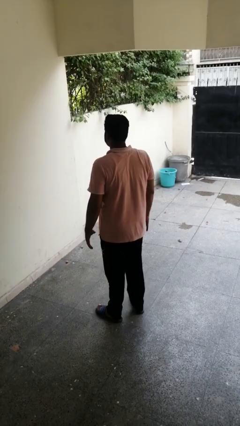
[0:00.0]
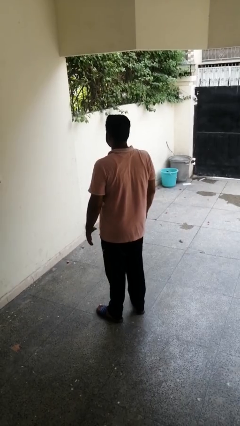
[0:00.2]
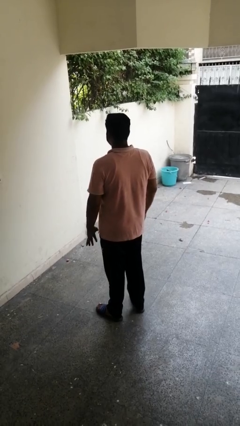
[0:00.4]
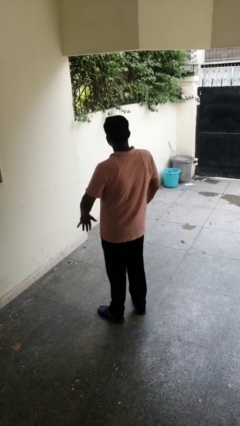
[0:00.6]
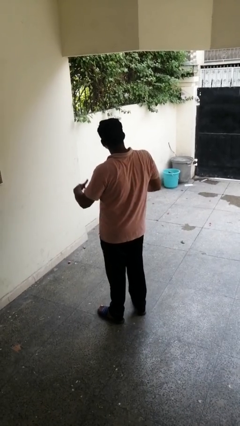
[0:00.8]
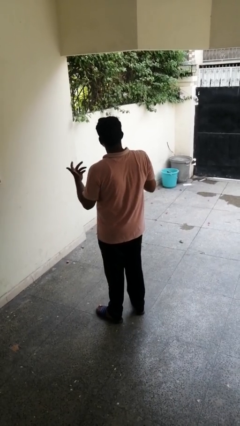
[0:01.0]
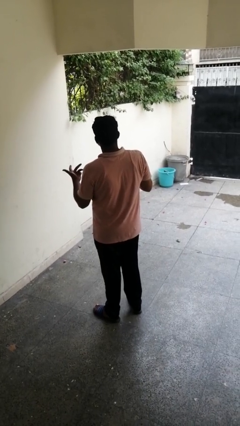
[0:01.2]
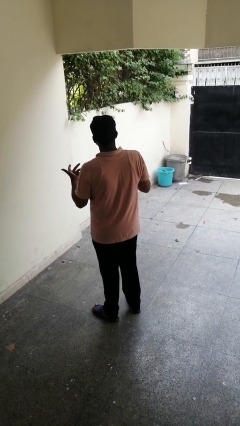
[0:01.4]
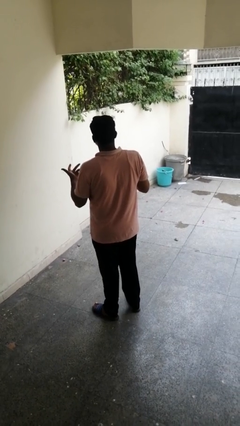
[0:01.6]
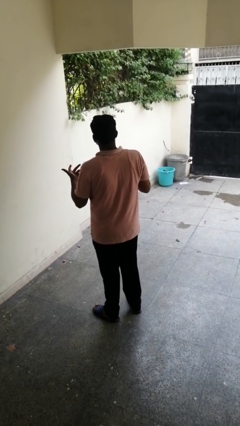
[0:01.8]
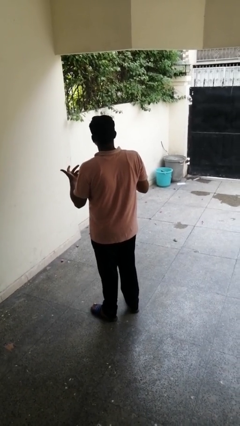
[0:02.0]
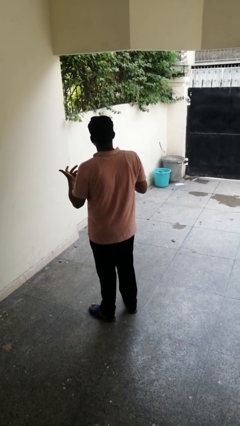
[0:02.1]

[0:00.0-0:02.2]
person shrugs

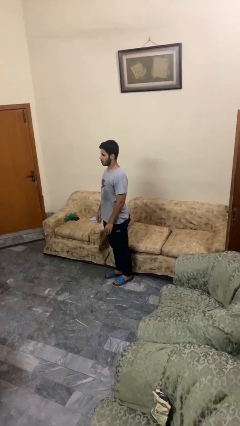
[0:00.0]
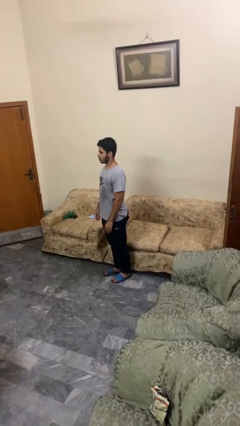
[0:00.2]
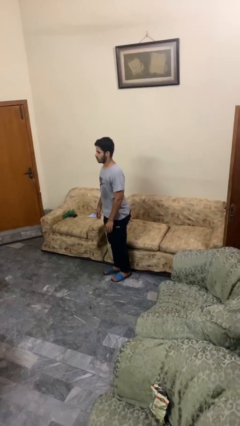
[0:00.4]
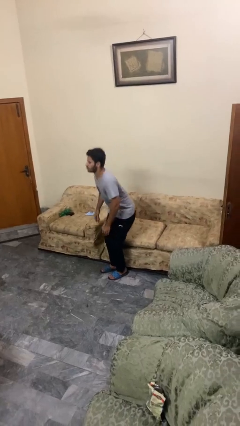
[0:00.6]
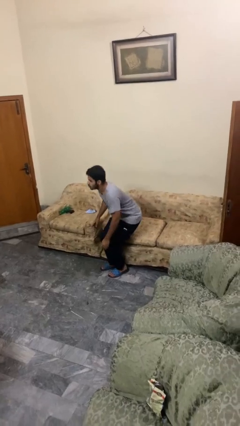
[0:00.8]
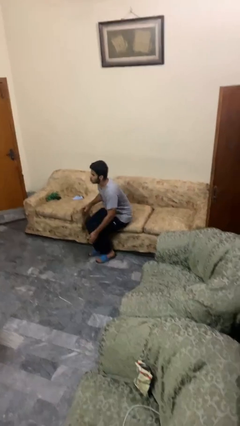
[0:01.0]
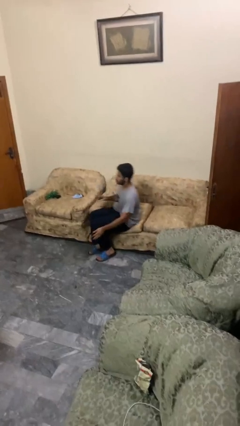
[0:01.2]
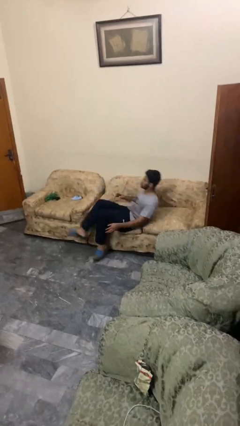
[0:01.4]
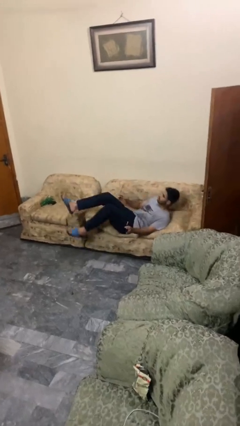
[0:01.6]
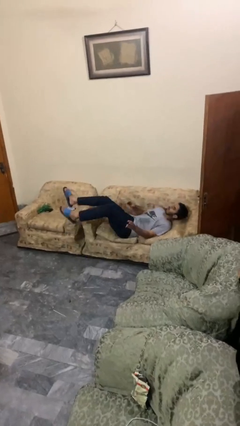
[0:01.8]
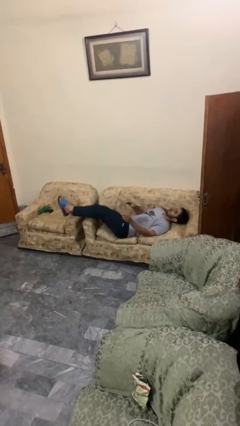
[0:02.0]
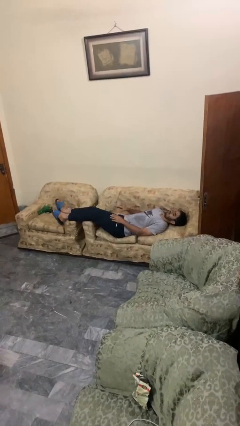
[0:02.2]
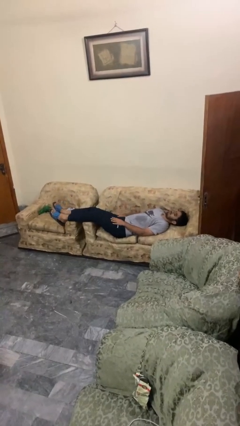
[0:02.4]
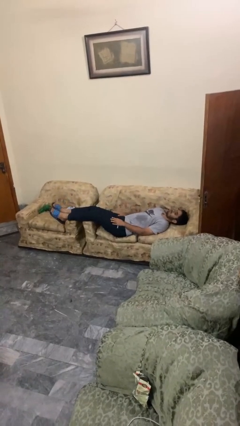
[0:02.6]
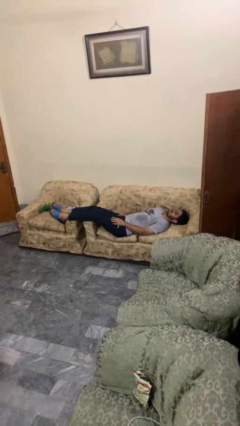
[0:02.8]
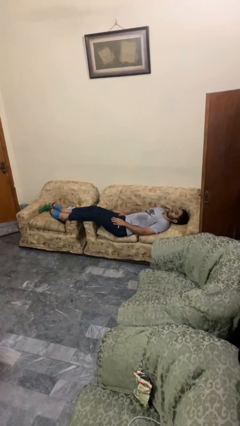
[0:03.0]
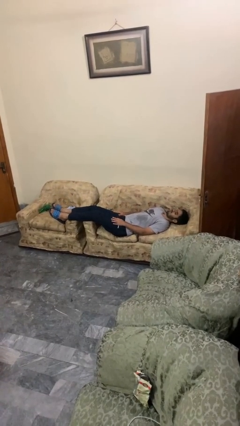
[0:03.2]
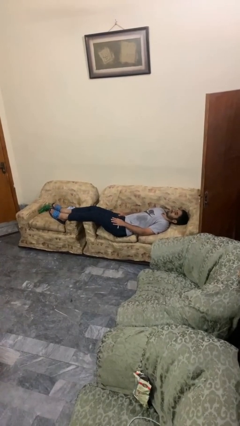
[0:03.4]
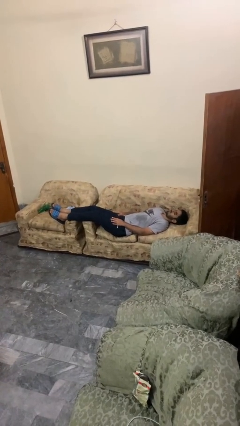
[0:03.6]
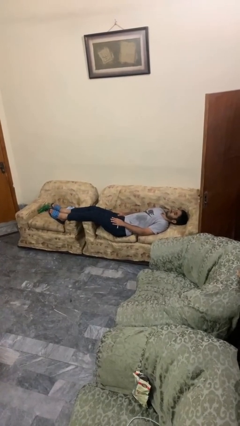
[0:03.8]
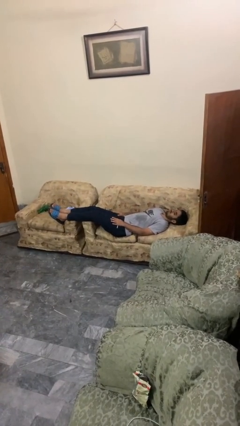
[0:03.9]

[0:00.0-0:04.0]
person lies down on couch

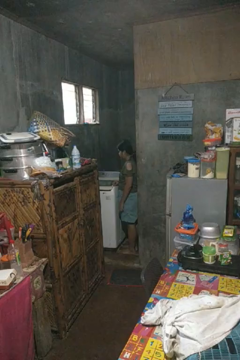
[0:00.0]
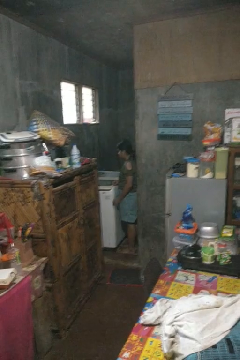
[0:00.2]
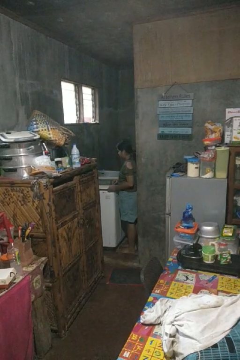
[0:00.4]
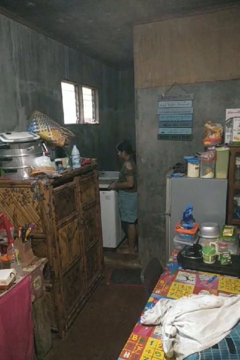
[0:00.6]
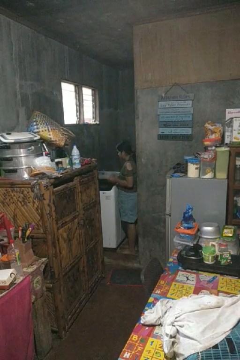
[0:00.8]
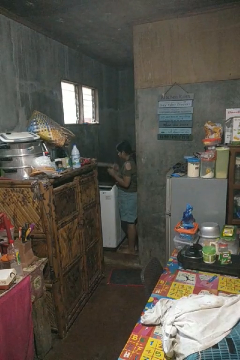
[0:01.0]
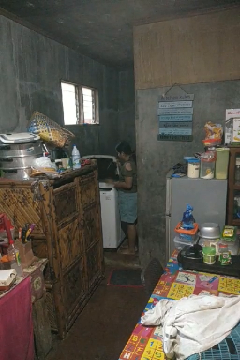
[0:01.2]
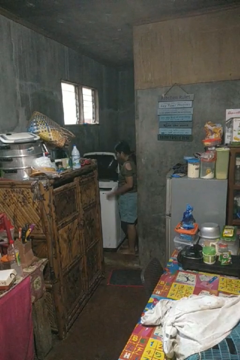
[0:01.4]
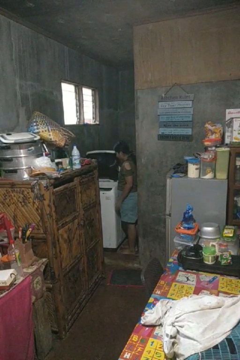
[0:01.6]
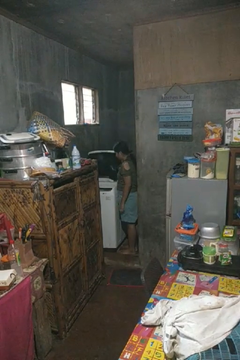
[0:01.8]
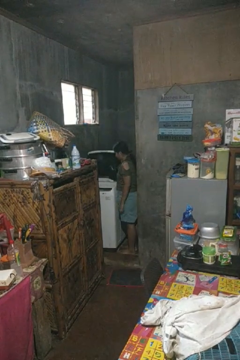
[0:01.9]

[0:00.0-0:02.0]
person opens clothes washer

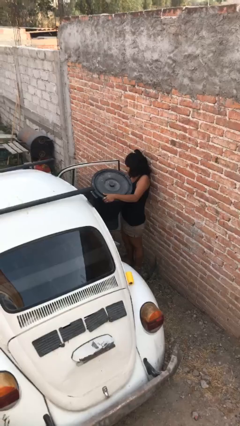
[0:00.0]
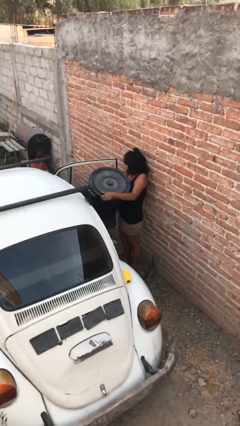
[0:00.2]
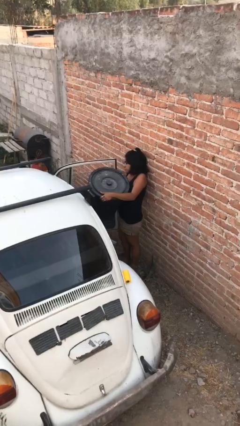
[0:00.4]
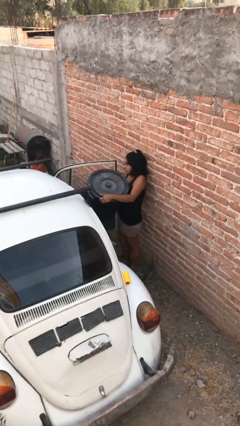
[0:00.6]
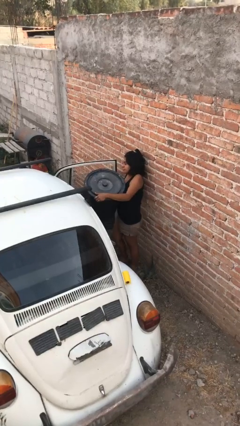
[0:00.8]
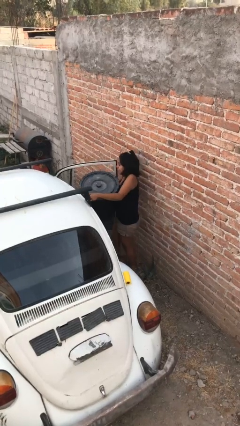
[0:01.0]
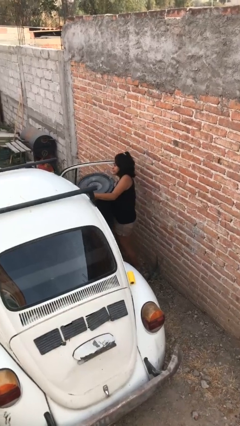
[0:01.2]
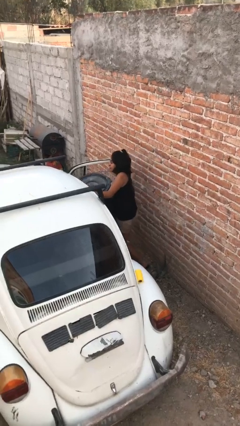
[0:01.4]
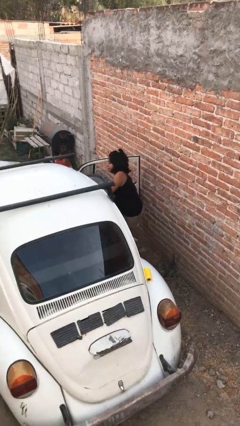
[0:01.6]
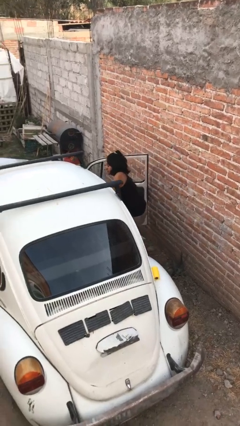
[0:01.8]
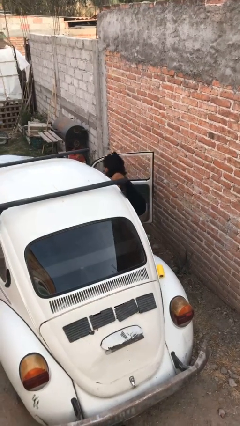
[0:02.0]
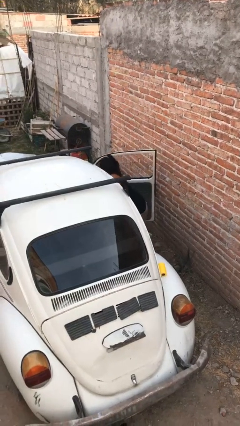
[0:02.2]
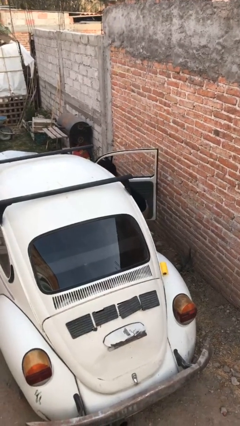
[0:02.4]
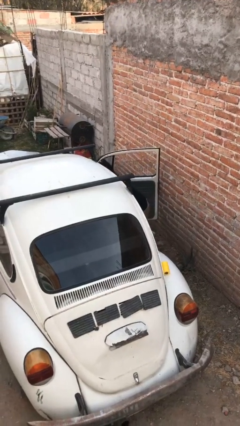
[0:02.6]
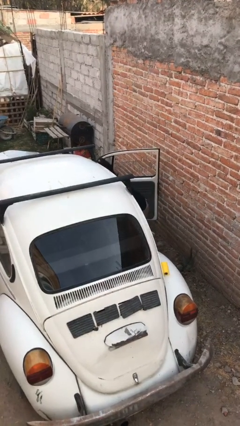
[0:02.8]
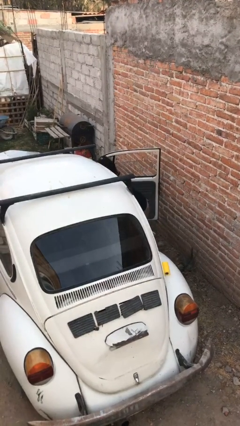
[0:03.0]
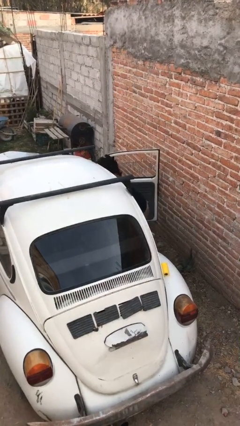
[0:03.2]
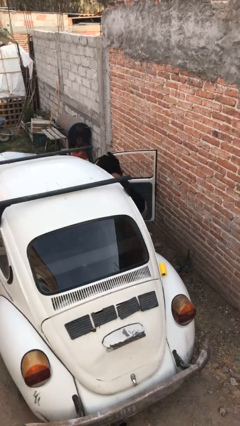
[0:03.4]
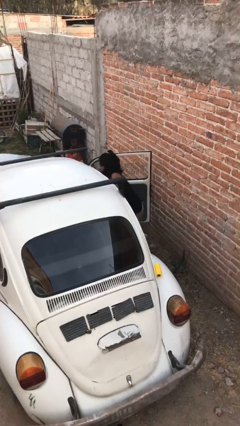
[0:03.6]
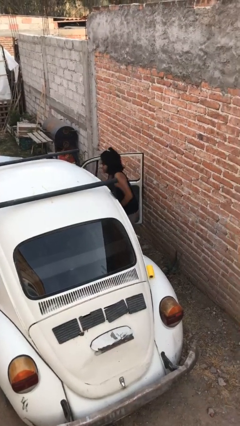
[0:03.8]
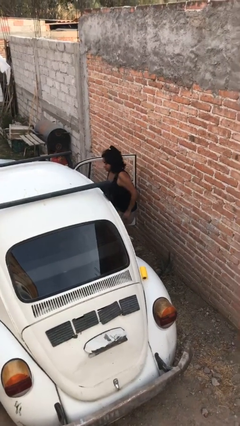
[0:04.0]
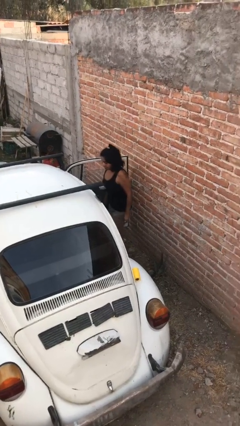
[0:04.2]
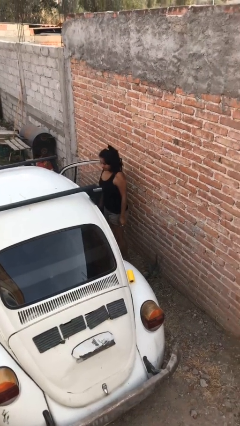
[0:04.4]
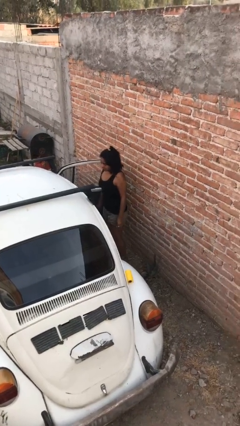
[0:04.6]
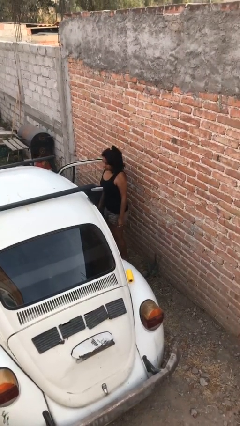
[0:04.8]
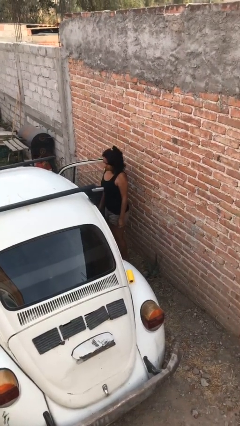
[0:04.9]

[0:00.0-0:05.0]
person loads car

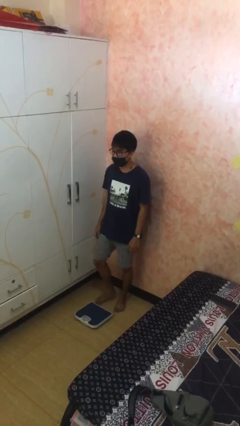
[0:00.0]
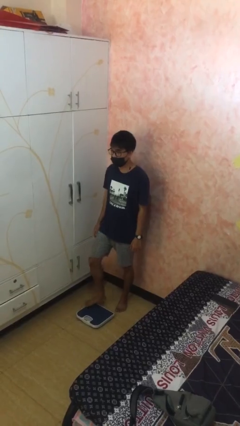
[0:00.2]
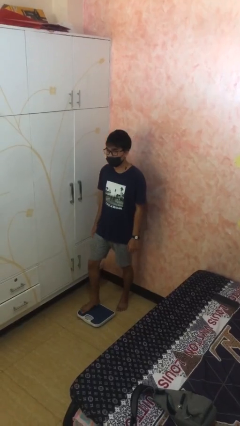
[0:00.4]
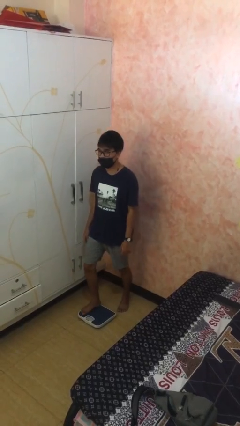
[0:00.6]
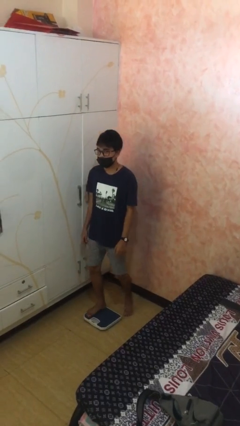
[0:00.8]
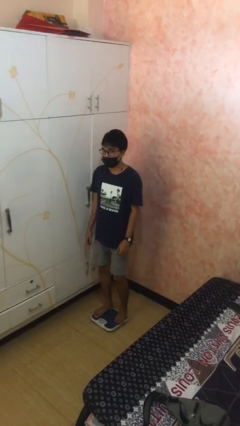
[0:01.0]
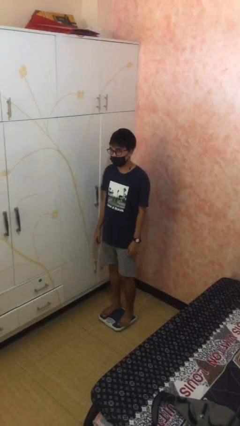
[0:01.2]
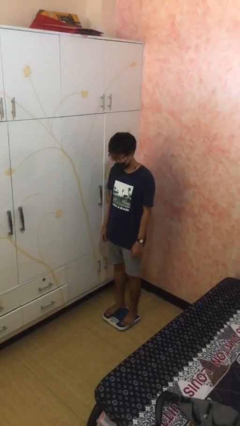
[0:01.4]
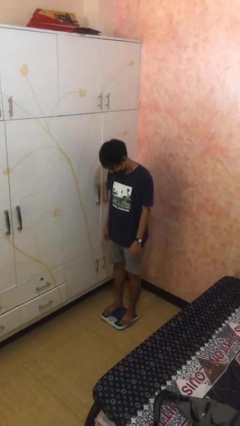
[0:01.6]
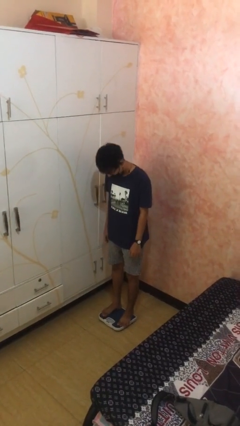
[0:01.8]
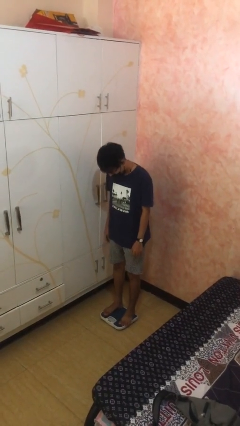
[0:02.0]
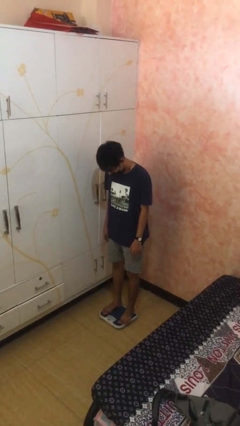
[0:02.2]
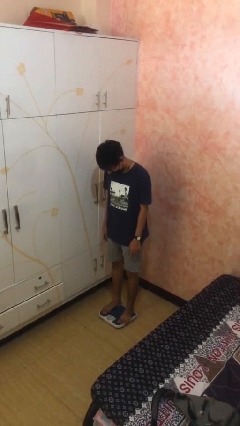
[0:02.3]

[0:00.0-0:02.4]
person uses bodyweight scale

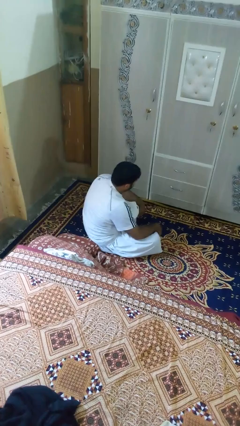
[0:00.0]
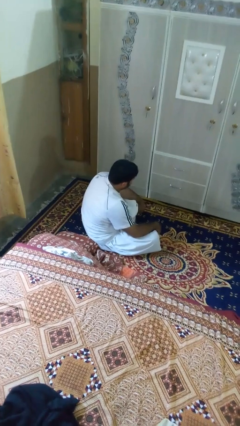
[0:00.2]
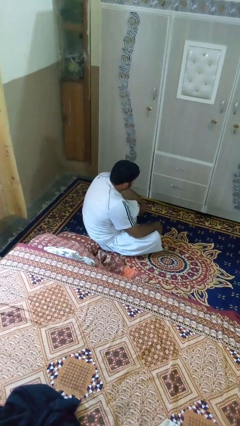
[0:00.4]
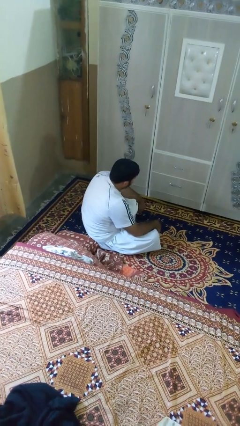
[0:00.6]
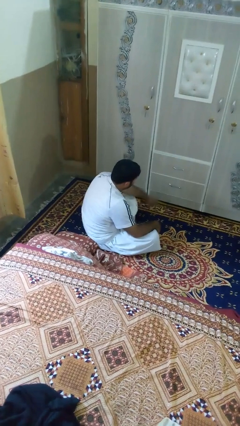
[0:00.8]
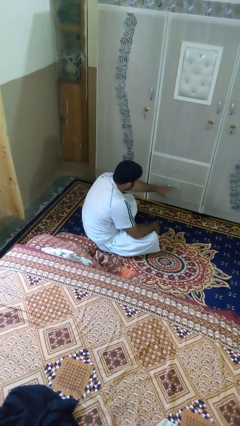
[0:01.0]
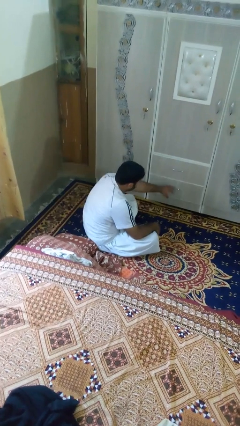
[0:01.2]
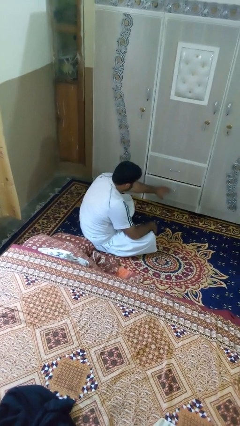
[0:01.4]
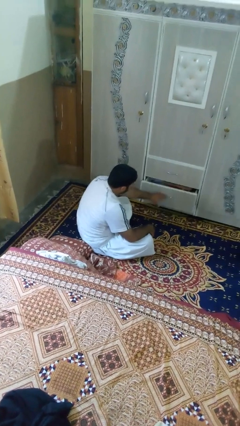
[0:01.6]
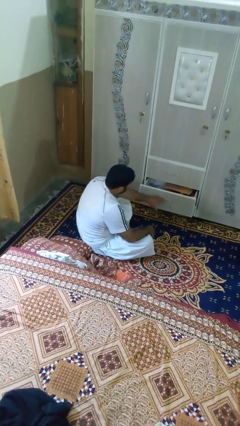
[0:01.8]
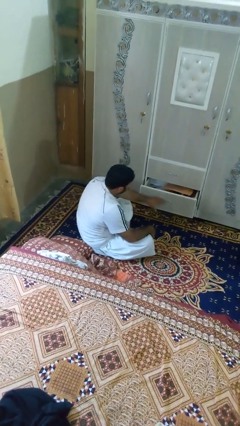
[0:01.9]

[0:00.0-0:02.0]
person opens dresser drawer
